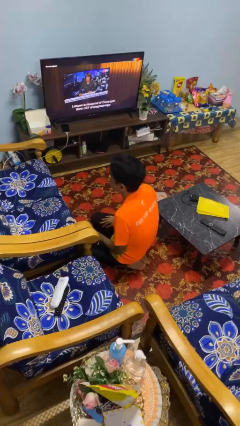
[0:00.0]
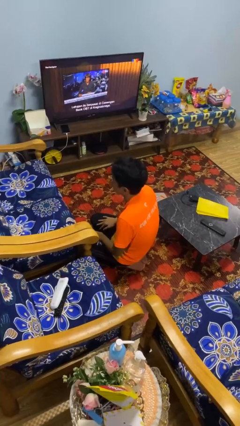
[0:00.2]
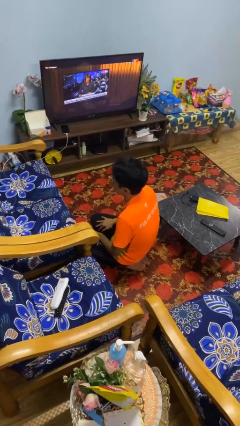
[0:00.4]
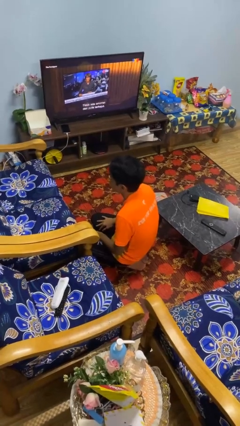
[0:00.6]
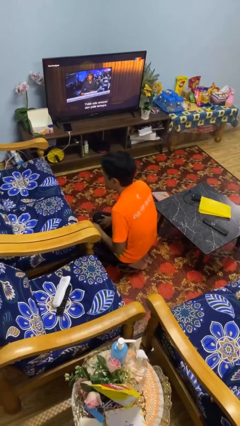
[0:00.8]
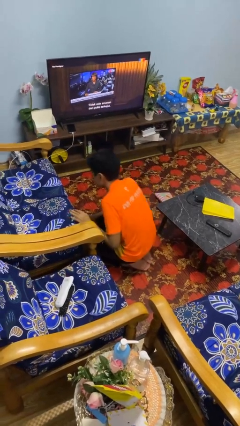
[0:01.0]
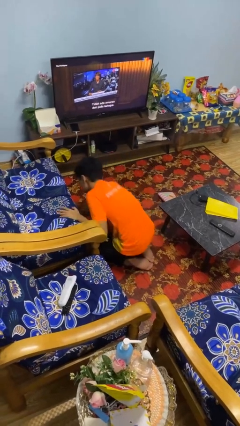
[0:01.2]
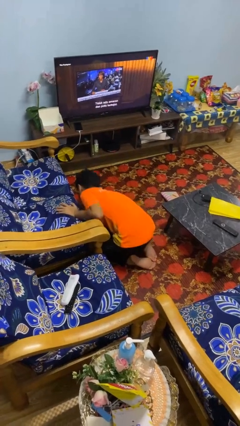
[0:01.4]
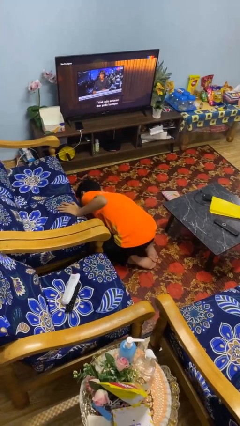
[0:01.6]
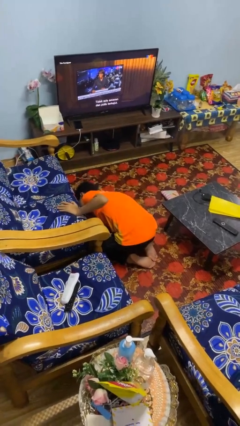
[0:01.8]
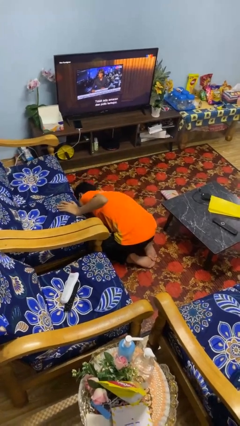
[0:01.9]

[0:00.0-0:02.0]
person searches under couch

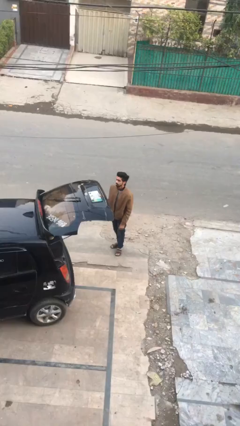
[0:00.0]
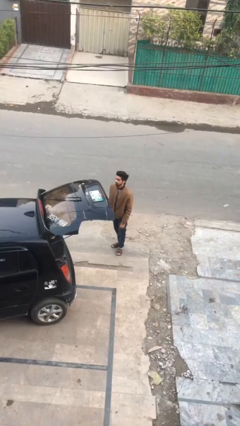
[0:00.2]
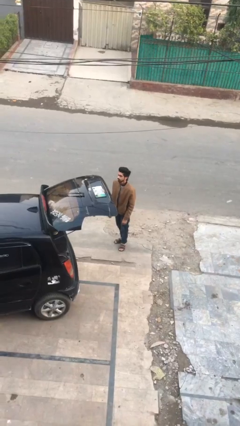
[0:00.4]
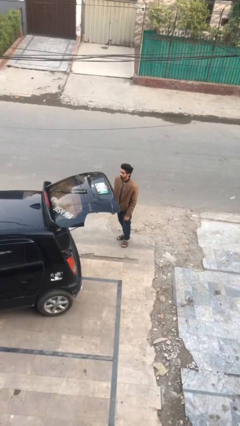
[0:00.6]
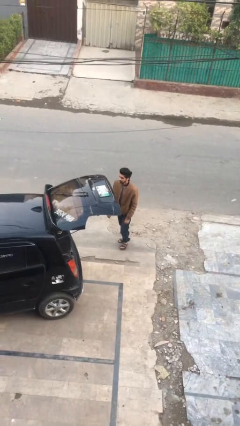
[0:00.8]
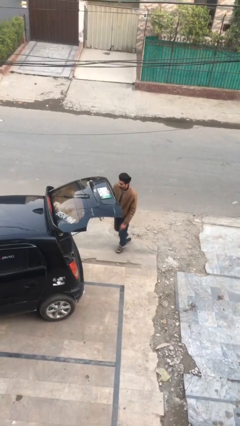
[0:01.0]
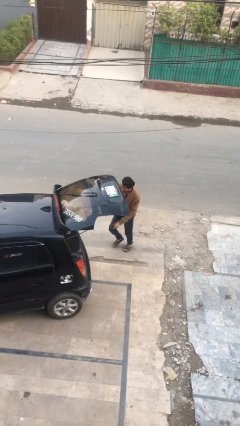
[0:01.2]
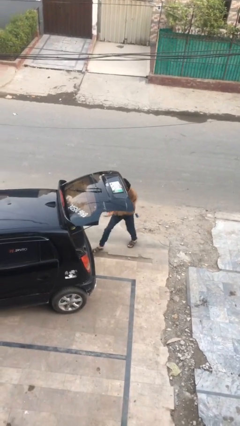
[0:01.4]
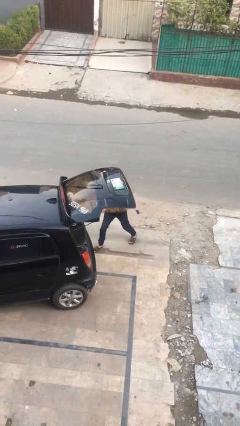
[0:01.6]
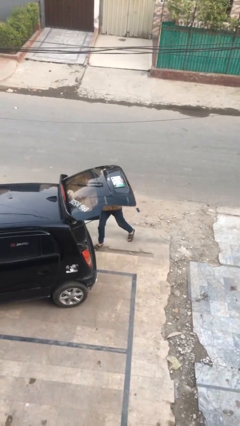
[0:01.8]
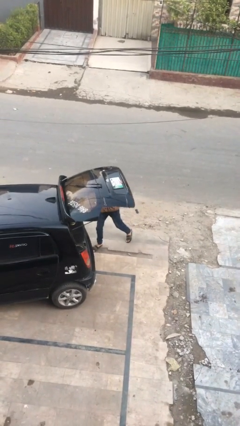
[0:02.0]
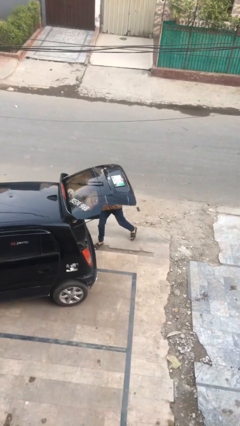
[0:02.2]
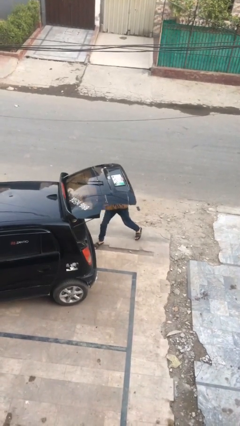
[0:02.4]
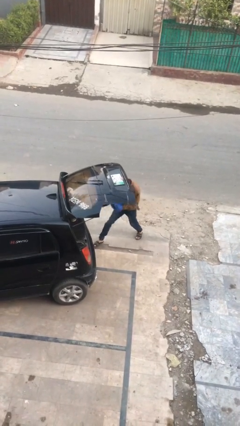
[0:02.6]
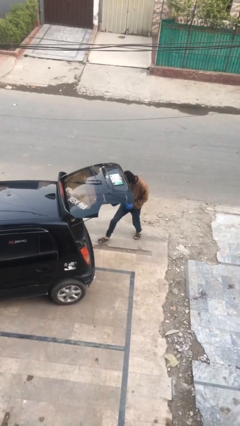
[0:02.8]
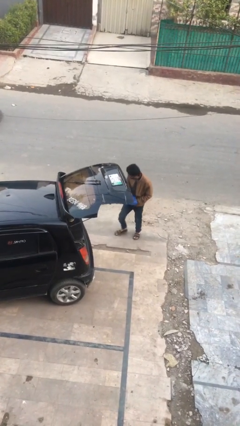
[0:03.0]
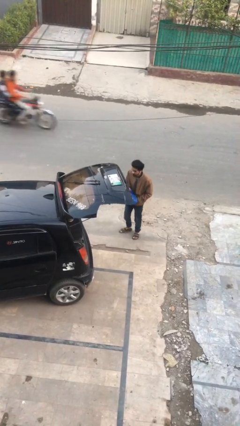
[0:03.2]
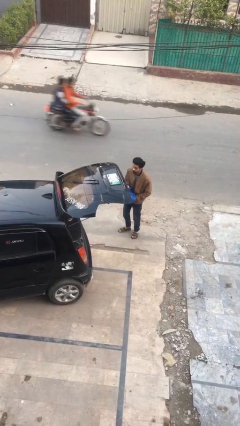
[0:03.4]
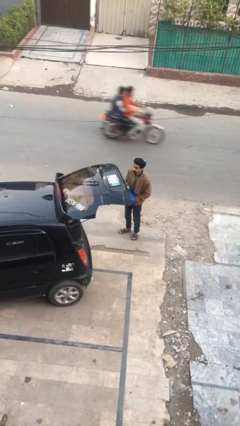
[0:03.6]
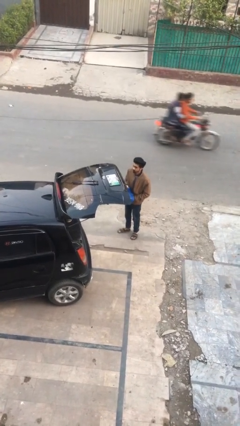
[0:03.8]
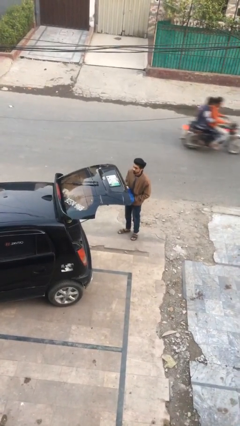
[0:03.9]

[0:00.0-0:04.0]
person unloads car

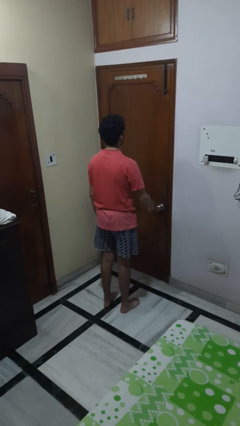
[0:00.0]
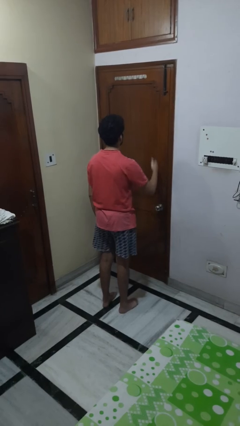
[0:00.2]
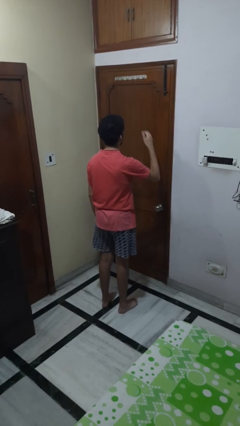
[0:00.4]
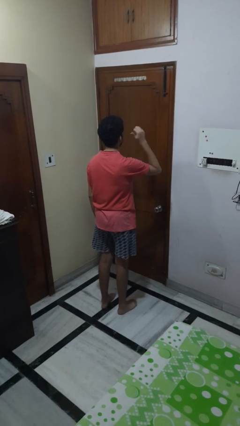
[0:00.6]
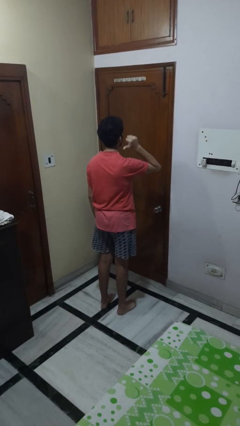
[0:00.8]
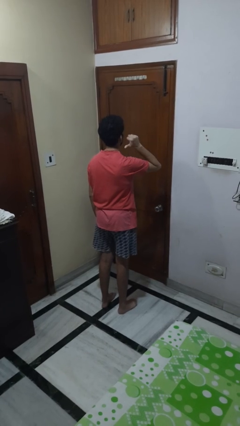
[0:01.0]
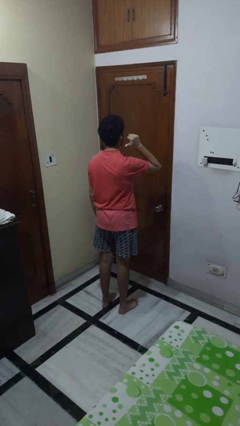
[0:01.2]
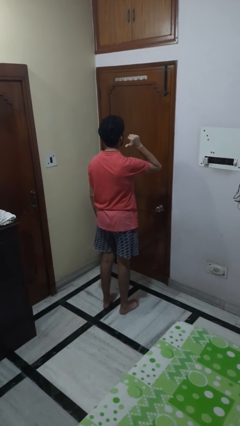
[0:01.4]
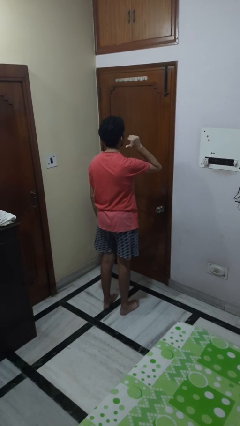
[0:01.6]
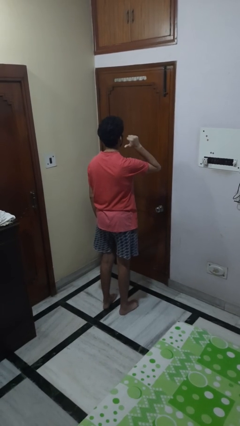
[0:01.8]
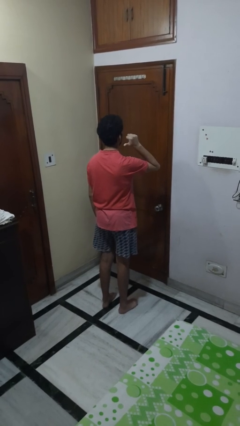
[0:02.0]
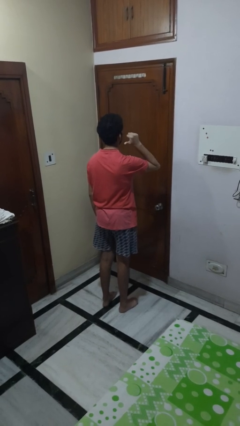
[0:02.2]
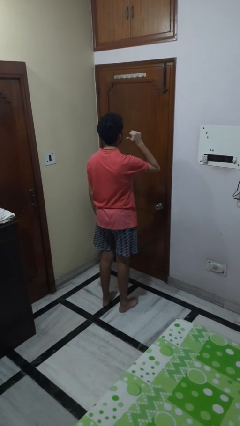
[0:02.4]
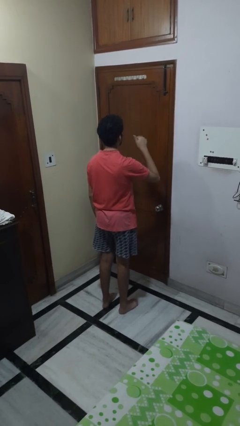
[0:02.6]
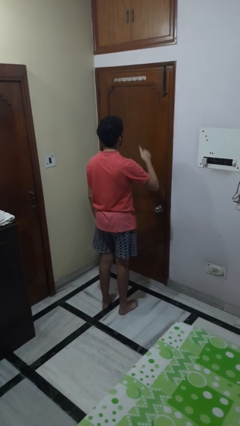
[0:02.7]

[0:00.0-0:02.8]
person gestures behind me

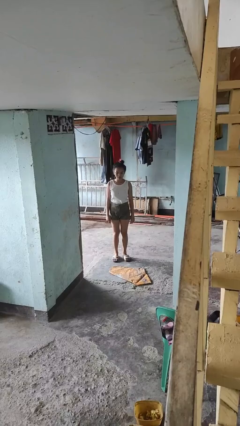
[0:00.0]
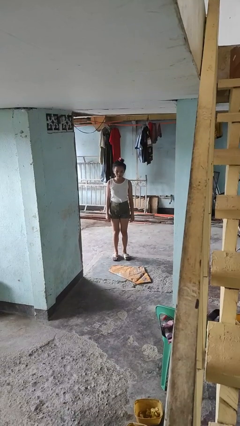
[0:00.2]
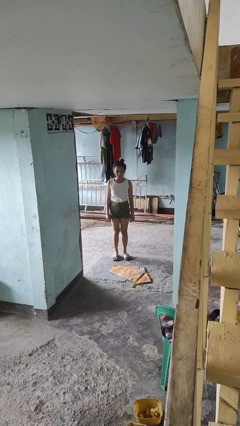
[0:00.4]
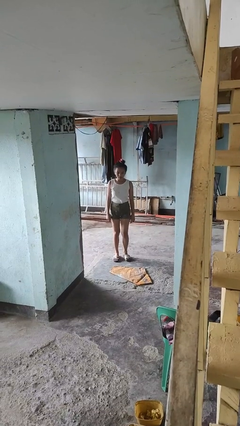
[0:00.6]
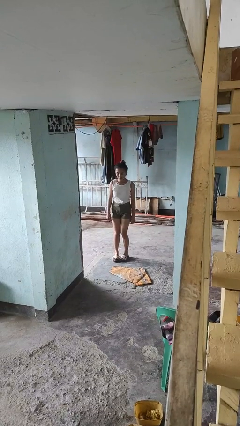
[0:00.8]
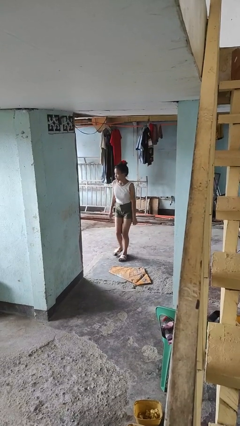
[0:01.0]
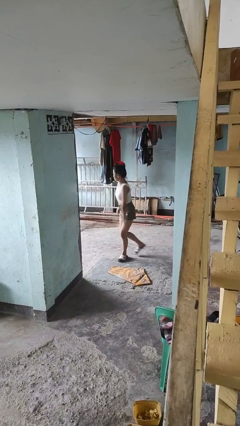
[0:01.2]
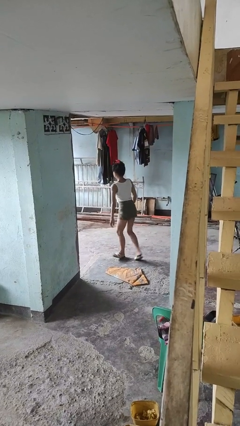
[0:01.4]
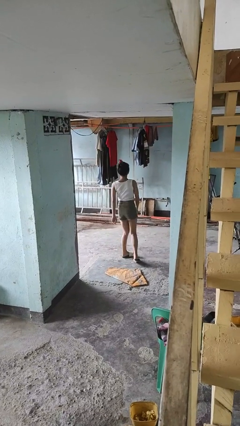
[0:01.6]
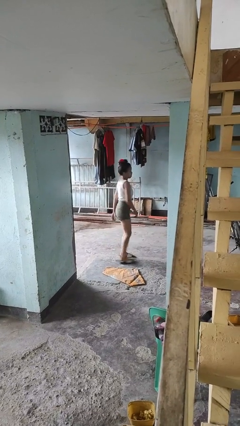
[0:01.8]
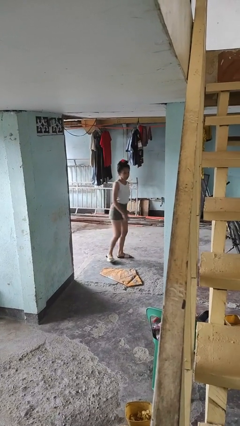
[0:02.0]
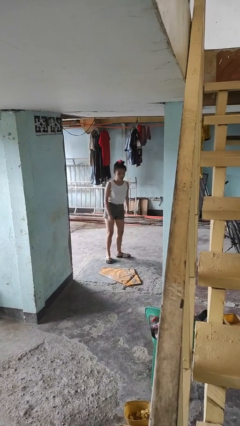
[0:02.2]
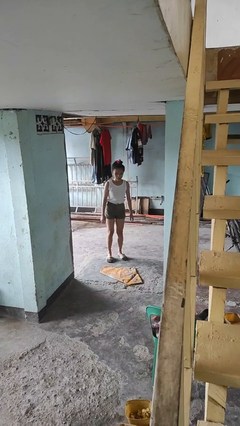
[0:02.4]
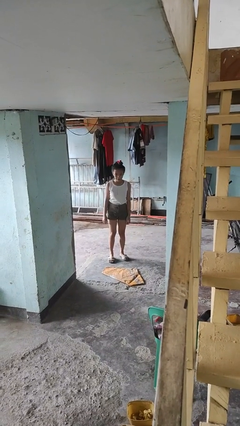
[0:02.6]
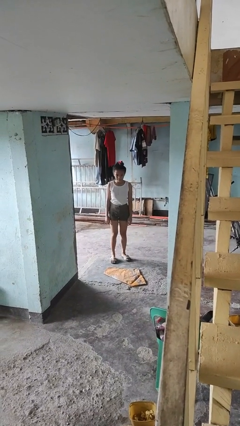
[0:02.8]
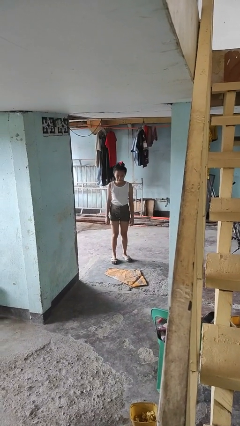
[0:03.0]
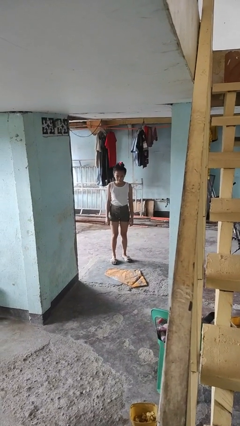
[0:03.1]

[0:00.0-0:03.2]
person twirls

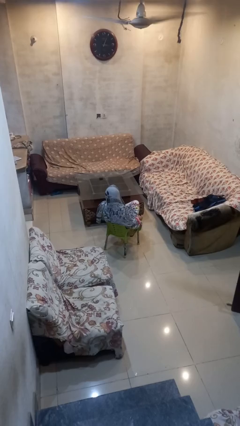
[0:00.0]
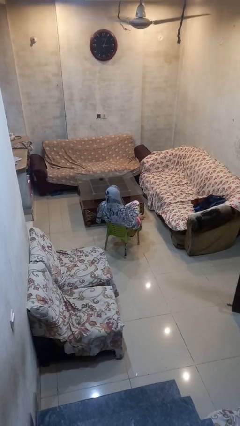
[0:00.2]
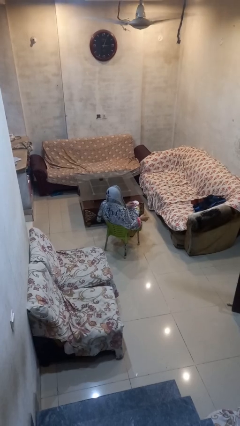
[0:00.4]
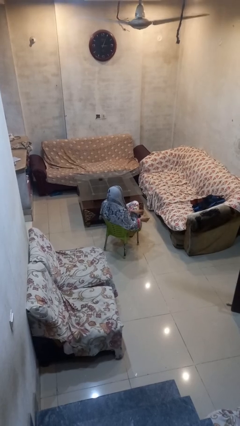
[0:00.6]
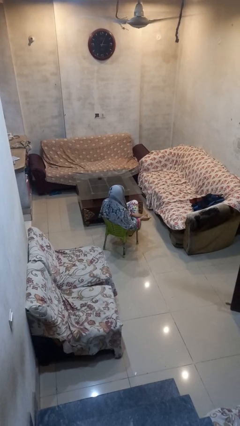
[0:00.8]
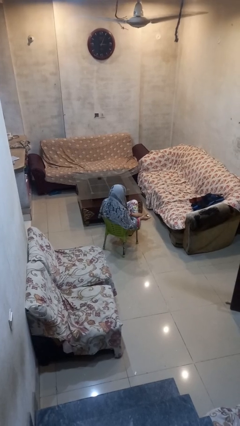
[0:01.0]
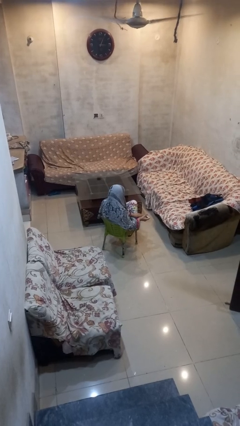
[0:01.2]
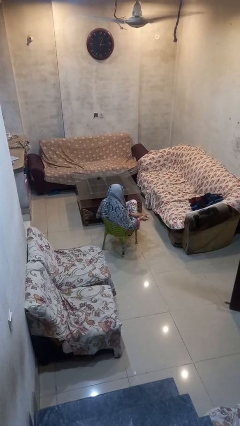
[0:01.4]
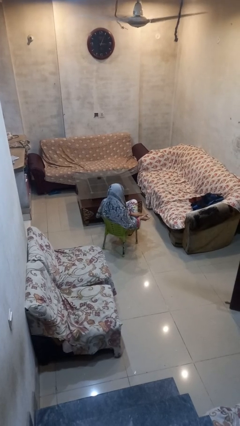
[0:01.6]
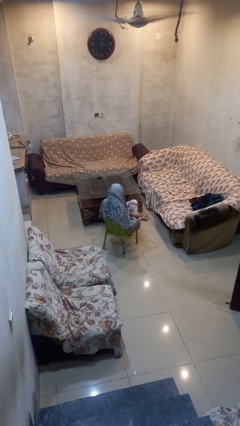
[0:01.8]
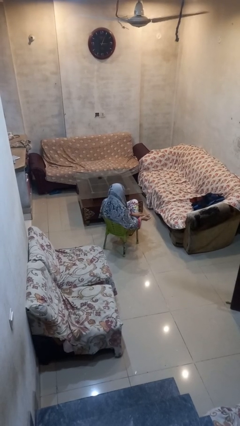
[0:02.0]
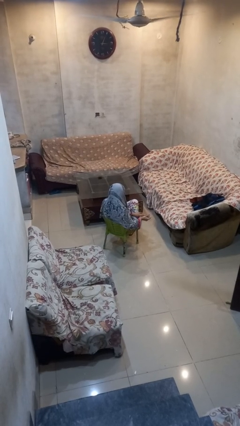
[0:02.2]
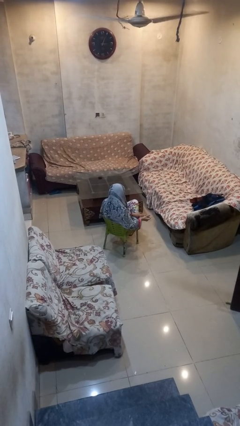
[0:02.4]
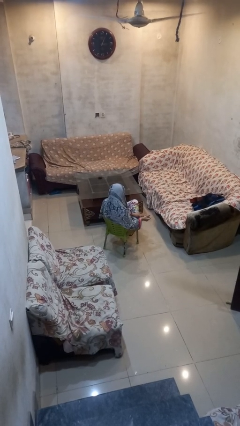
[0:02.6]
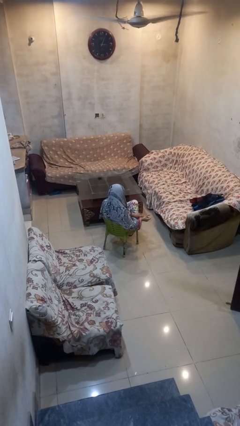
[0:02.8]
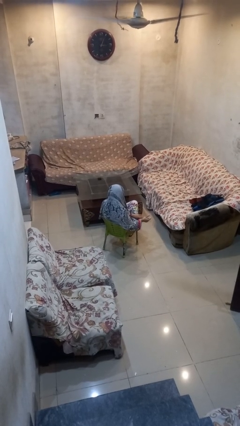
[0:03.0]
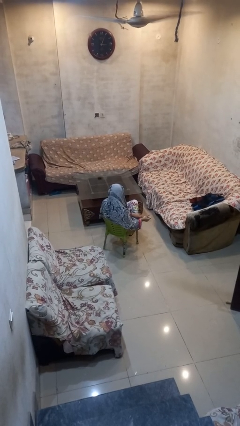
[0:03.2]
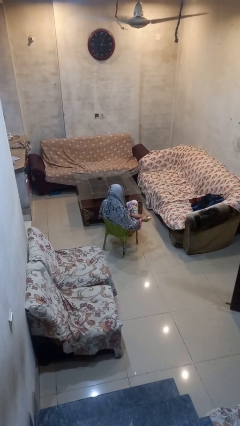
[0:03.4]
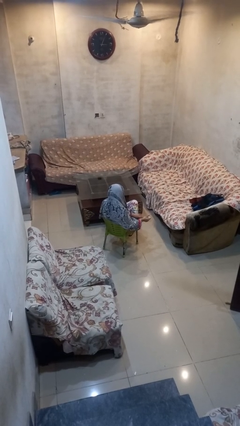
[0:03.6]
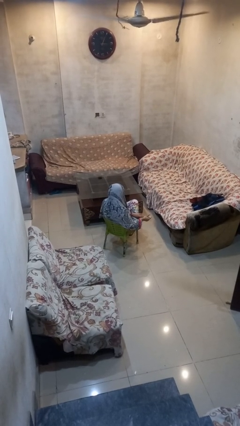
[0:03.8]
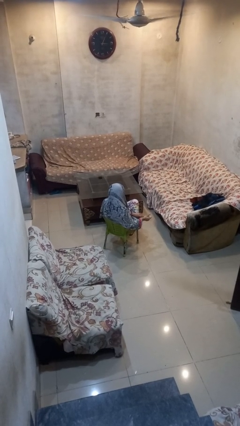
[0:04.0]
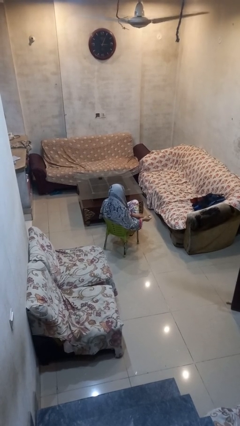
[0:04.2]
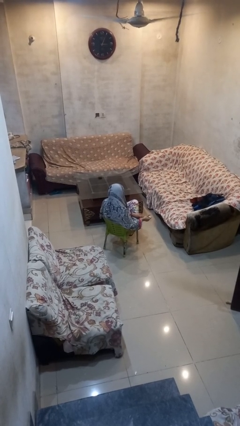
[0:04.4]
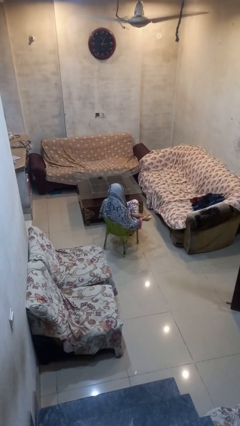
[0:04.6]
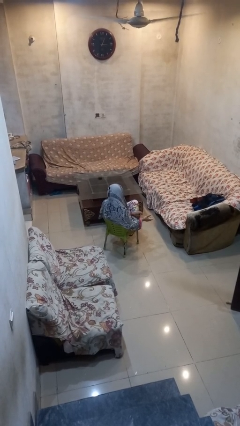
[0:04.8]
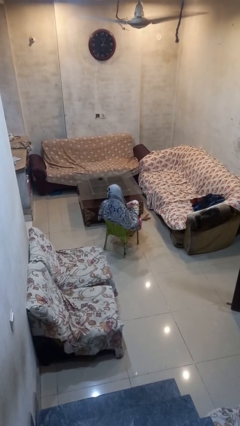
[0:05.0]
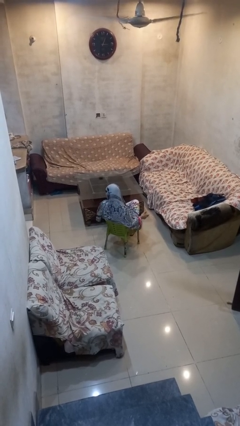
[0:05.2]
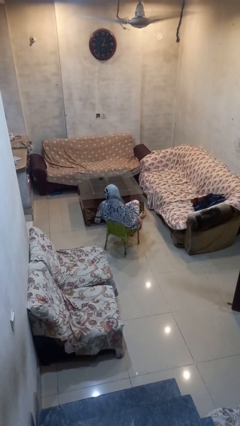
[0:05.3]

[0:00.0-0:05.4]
person clips fingernails
